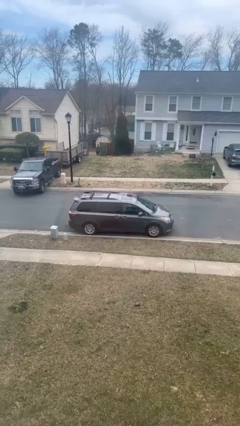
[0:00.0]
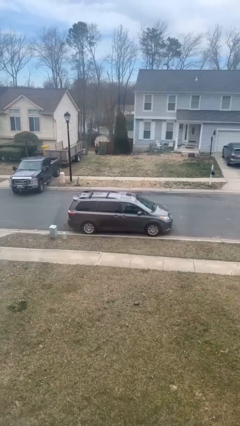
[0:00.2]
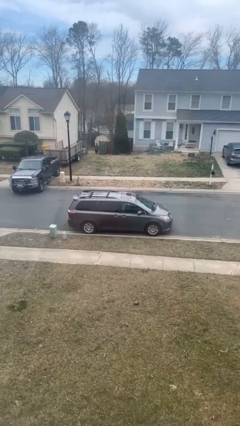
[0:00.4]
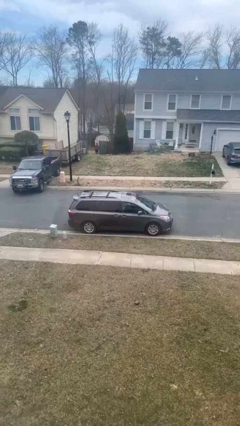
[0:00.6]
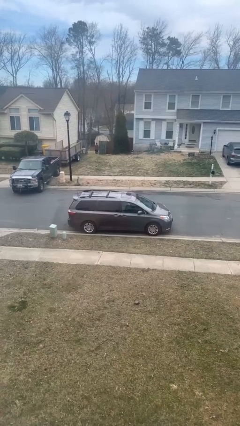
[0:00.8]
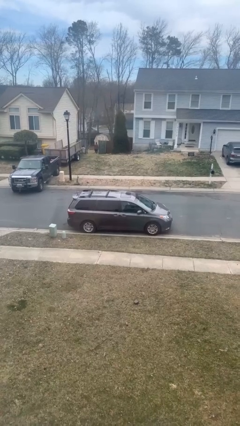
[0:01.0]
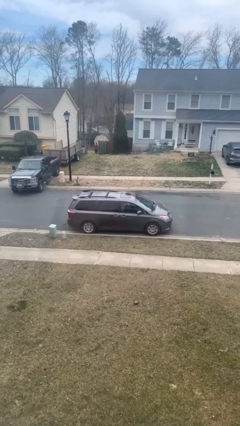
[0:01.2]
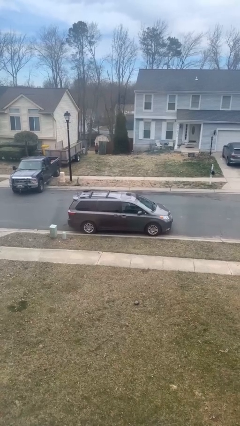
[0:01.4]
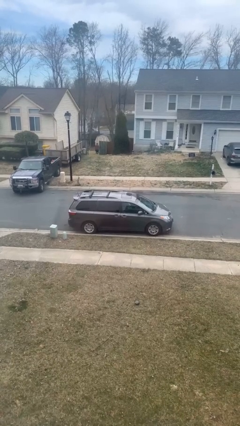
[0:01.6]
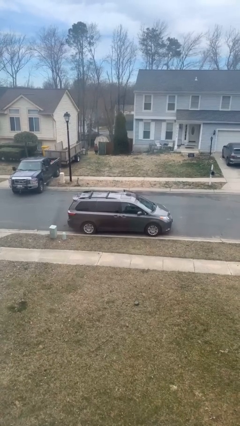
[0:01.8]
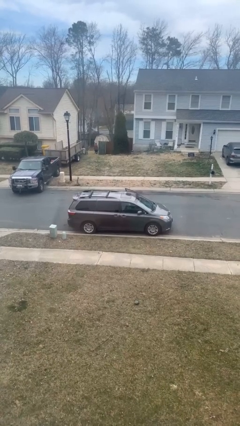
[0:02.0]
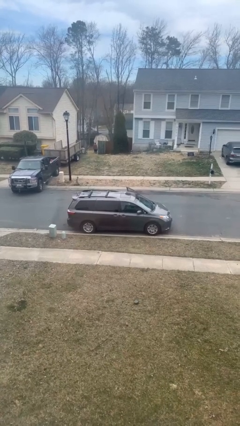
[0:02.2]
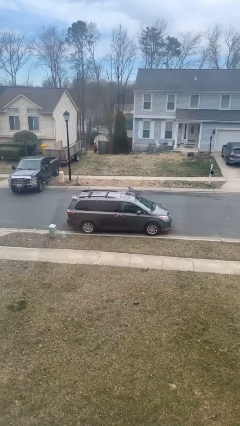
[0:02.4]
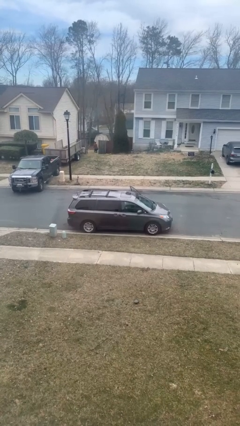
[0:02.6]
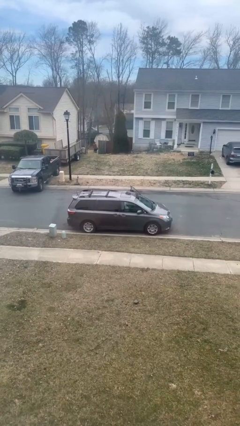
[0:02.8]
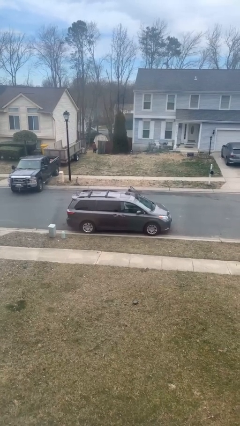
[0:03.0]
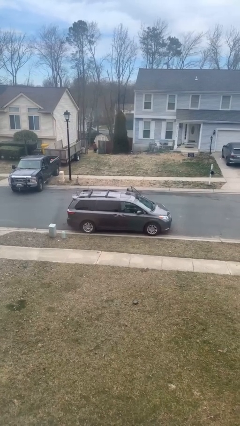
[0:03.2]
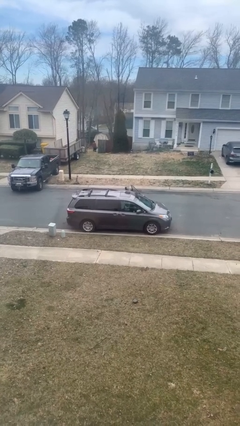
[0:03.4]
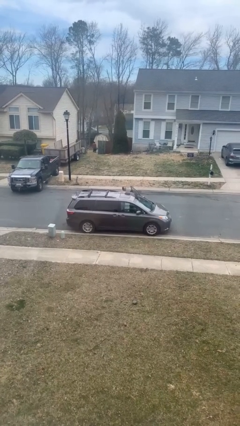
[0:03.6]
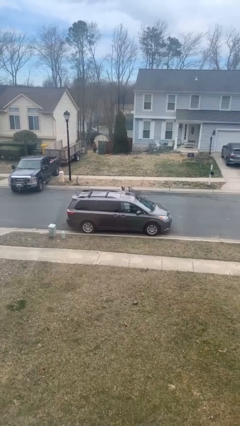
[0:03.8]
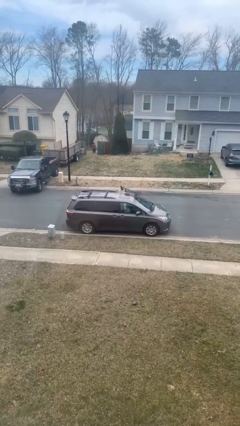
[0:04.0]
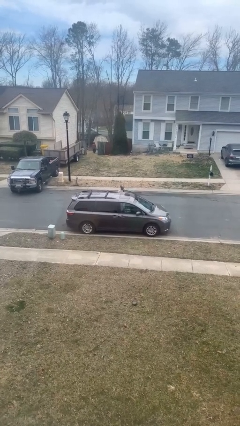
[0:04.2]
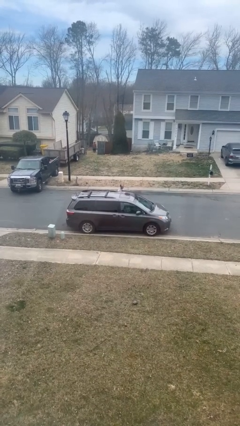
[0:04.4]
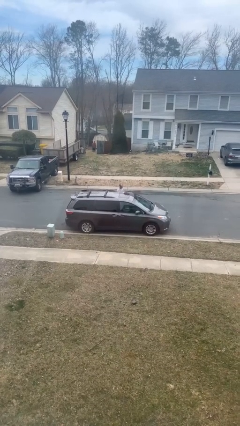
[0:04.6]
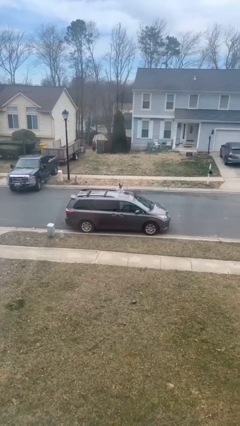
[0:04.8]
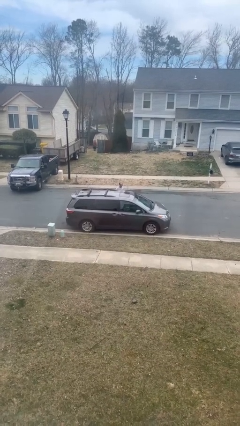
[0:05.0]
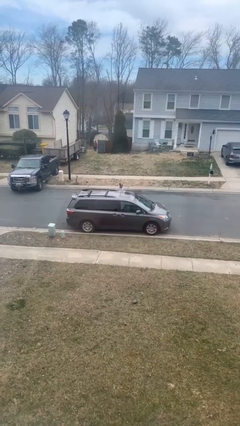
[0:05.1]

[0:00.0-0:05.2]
car drops off person

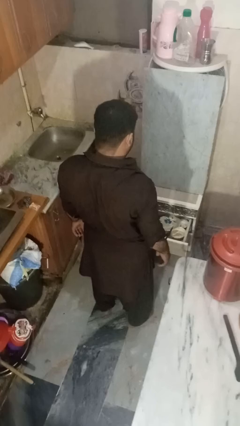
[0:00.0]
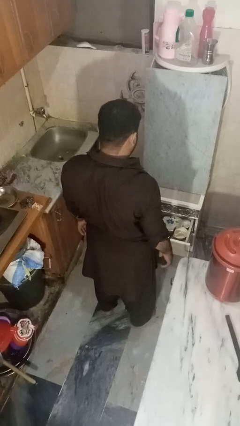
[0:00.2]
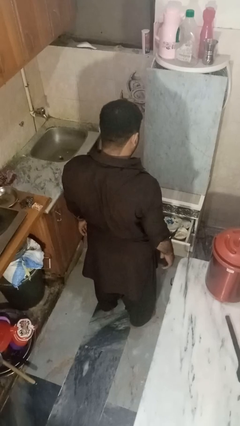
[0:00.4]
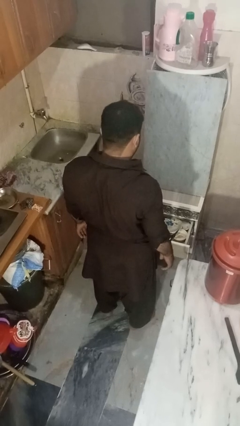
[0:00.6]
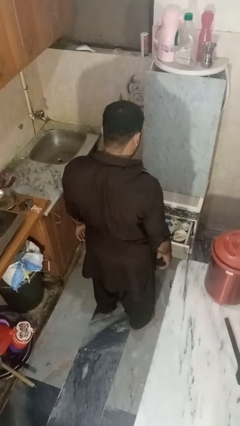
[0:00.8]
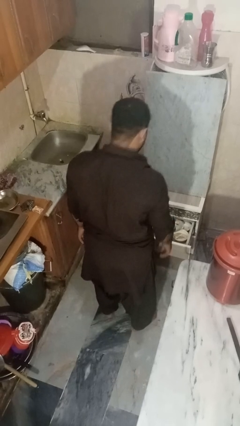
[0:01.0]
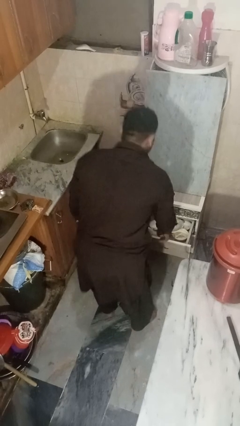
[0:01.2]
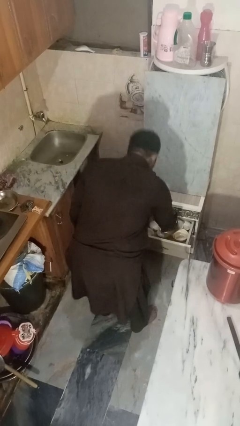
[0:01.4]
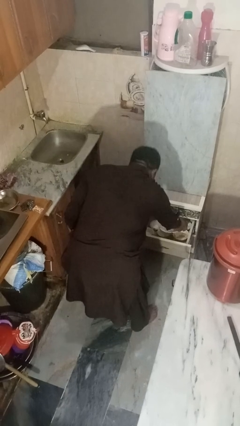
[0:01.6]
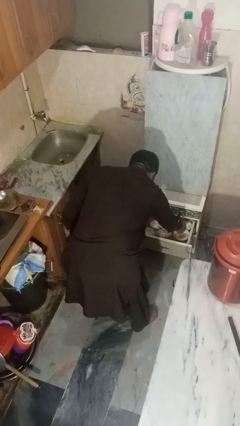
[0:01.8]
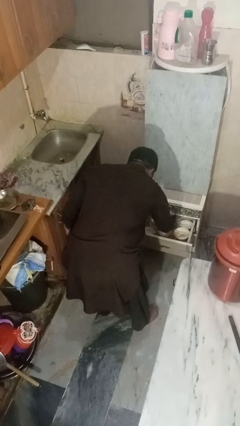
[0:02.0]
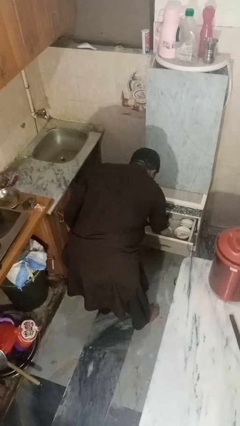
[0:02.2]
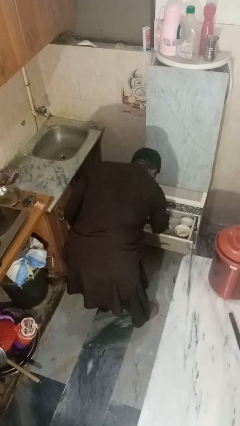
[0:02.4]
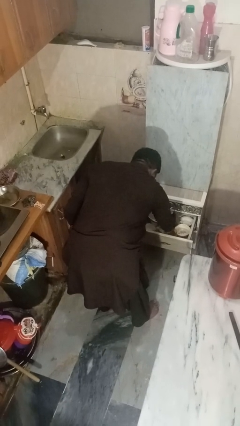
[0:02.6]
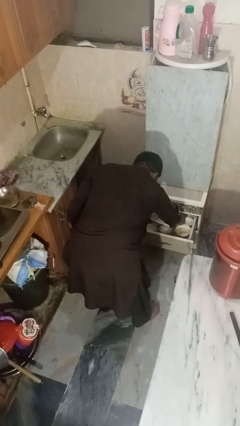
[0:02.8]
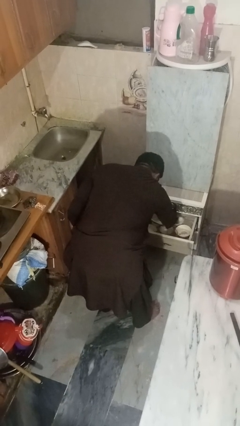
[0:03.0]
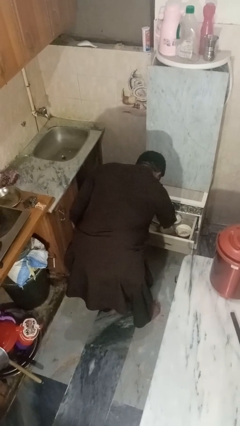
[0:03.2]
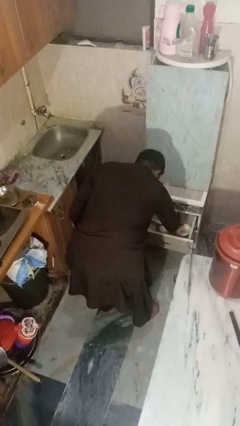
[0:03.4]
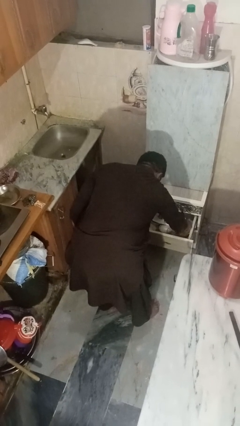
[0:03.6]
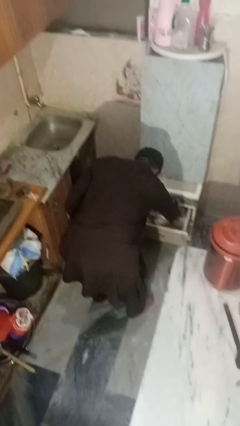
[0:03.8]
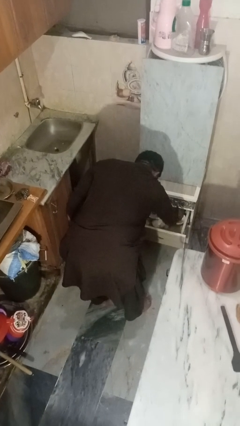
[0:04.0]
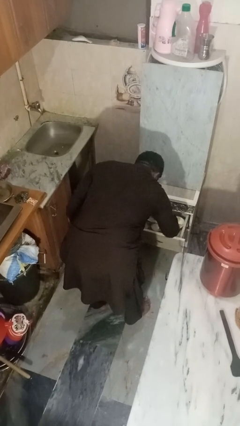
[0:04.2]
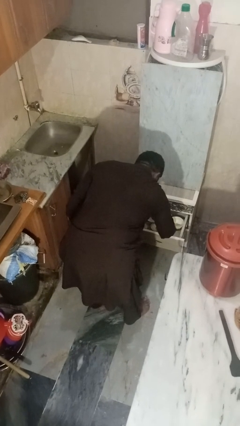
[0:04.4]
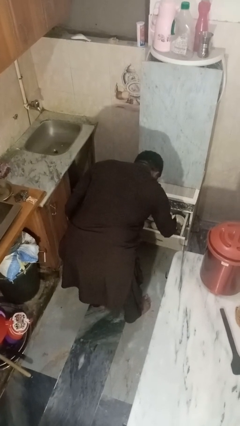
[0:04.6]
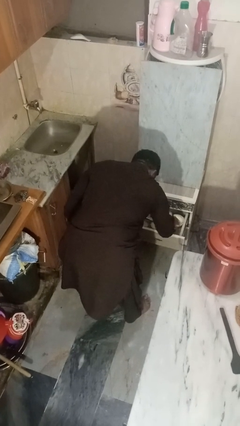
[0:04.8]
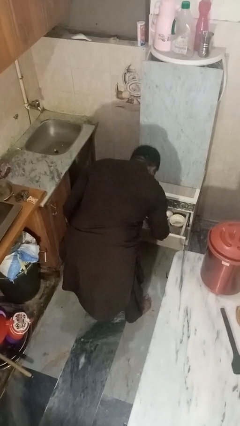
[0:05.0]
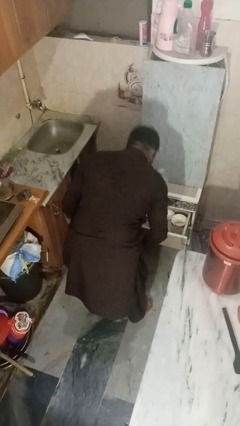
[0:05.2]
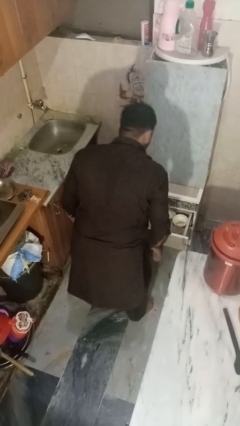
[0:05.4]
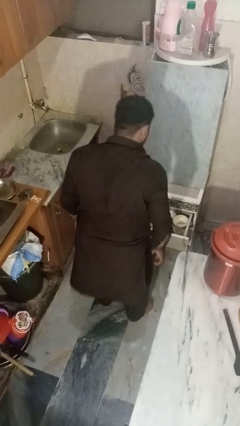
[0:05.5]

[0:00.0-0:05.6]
person searches in kitchen drawer

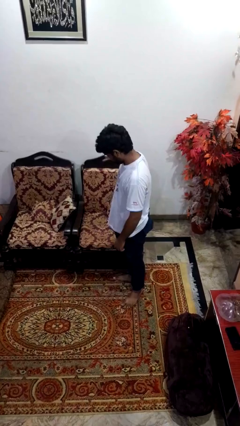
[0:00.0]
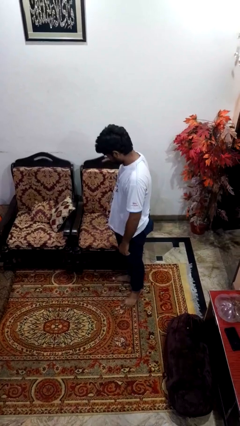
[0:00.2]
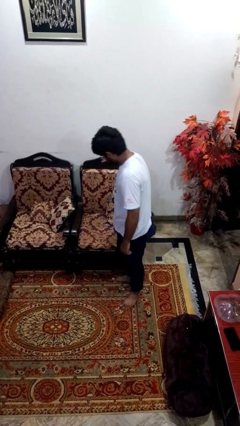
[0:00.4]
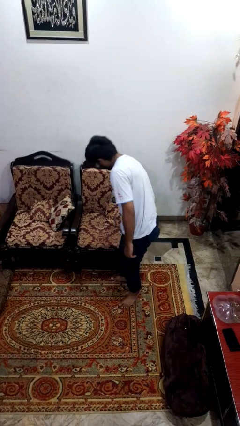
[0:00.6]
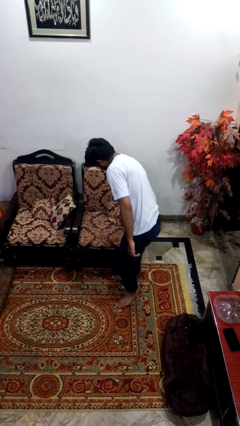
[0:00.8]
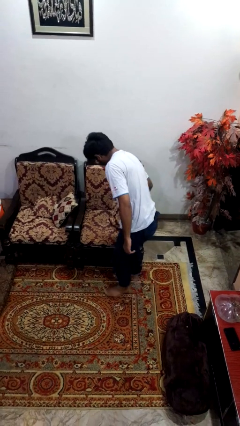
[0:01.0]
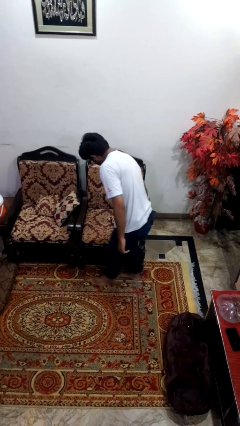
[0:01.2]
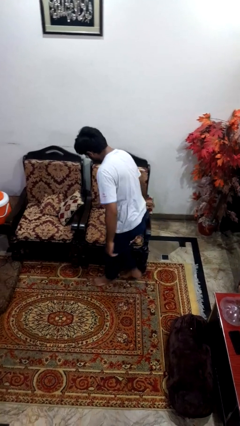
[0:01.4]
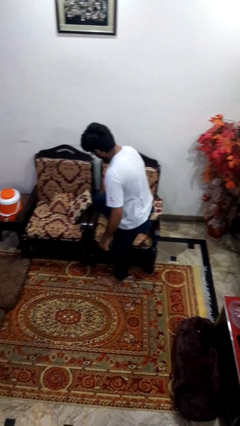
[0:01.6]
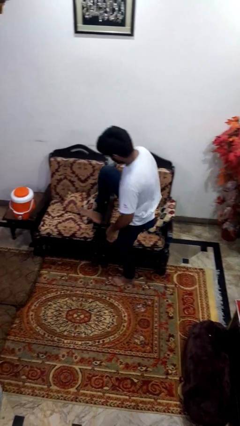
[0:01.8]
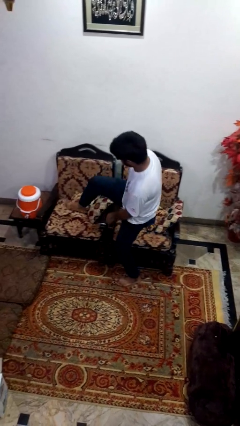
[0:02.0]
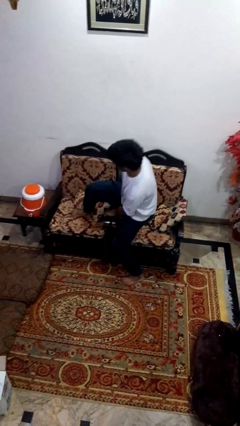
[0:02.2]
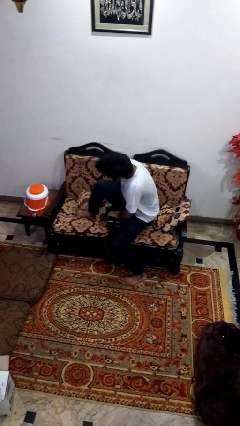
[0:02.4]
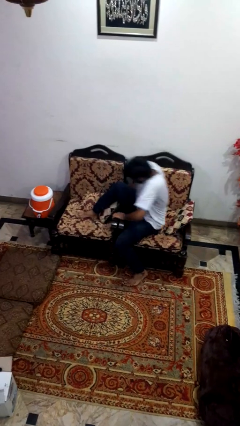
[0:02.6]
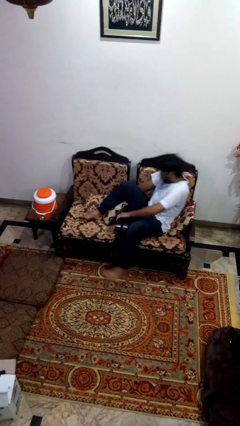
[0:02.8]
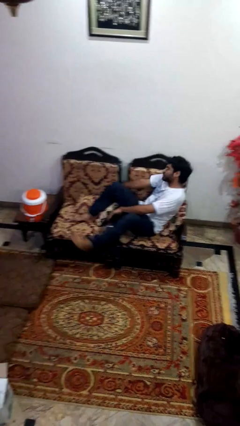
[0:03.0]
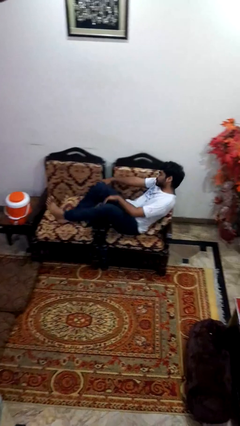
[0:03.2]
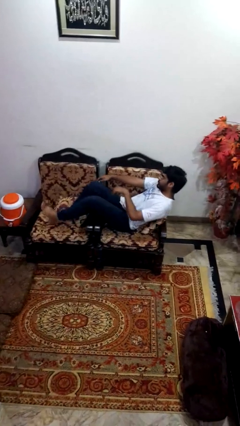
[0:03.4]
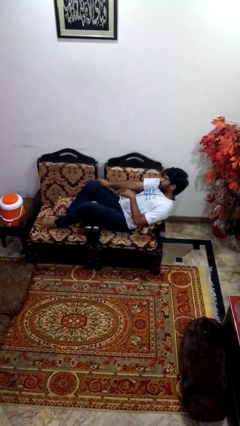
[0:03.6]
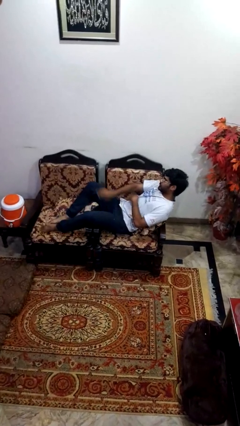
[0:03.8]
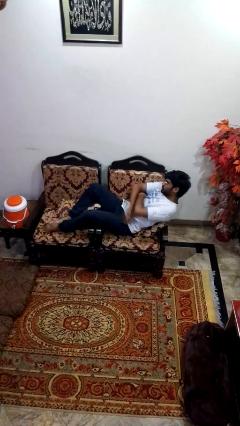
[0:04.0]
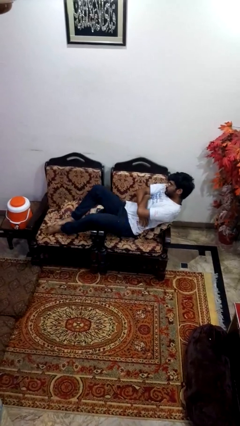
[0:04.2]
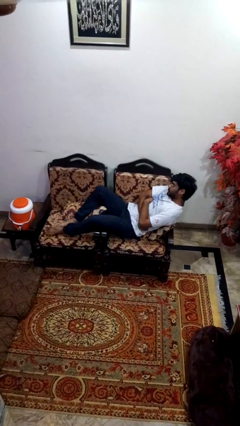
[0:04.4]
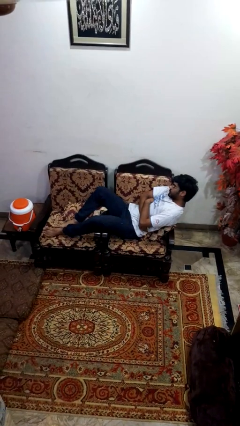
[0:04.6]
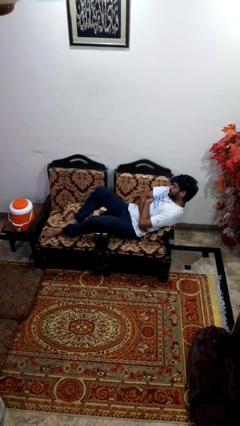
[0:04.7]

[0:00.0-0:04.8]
person lies down on couch

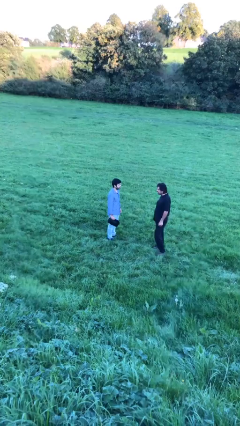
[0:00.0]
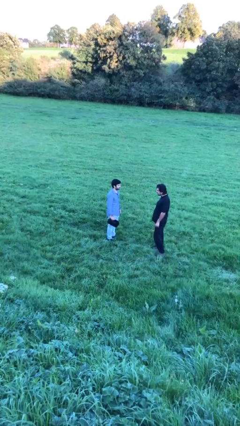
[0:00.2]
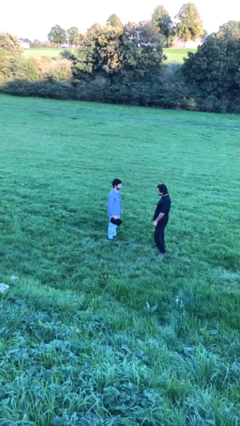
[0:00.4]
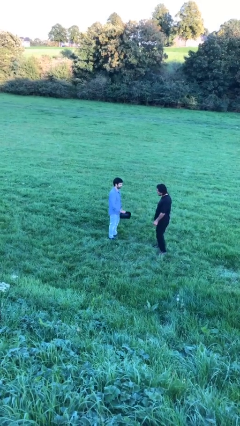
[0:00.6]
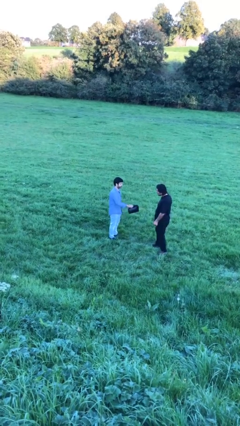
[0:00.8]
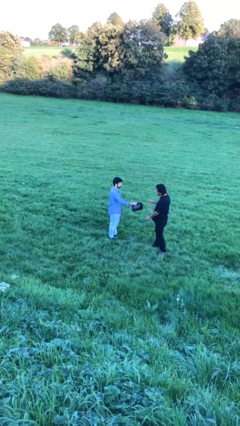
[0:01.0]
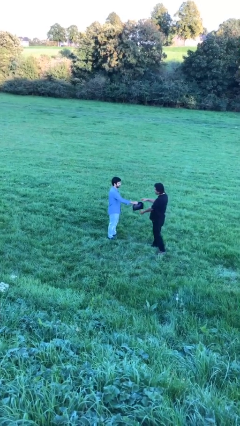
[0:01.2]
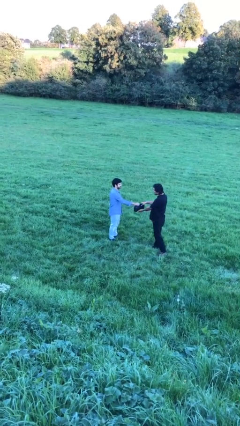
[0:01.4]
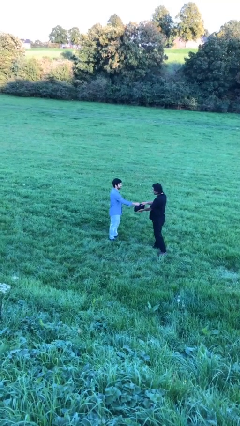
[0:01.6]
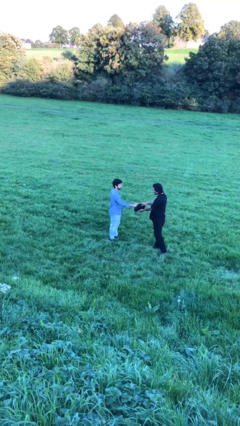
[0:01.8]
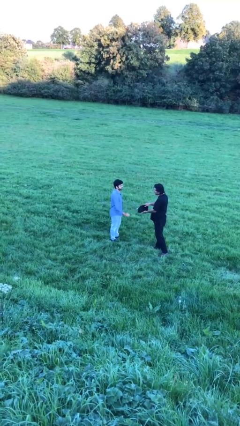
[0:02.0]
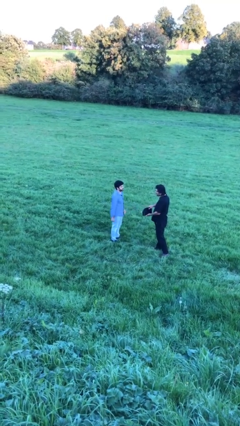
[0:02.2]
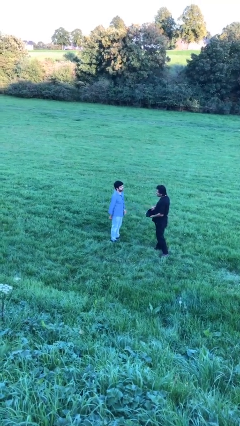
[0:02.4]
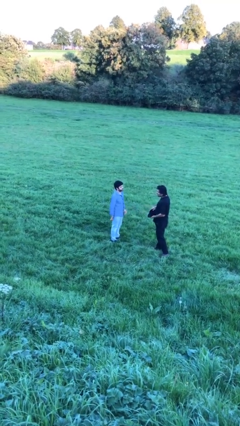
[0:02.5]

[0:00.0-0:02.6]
person transfers object to person
